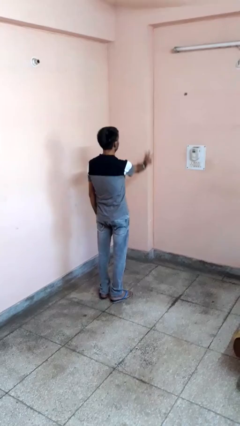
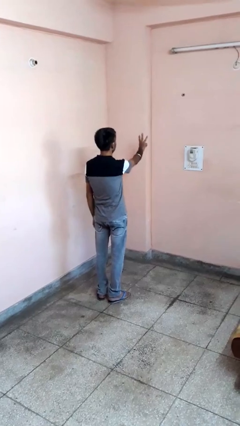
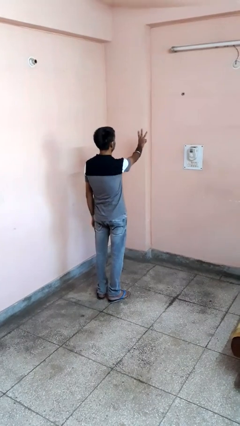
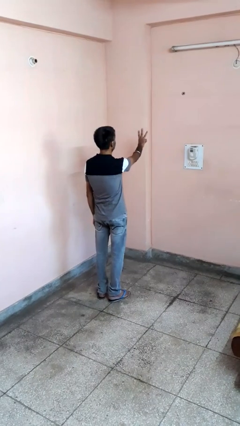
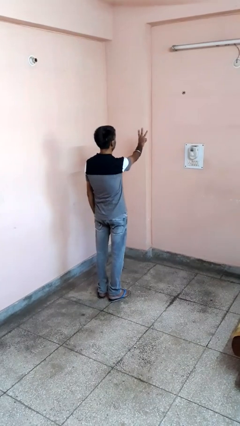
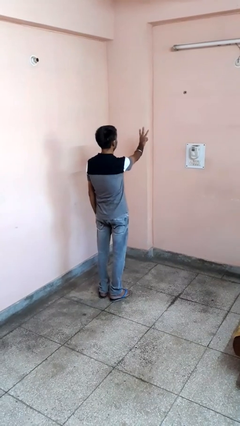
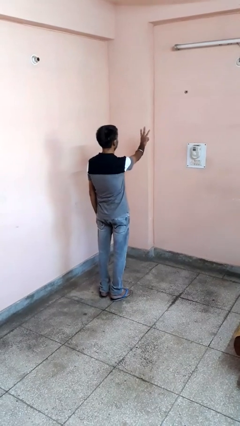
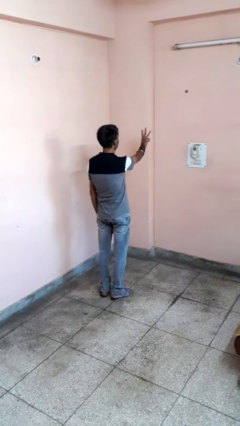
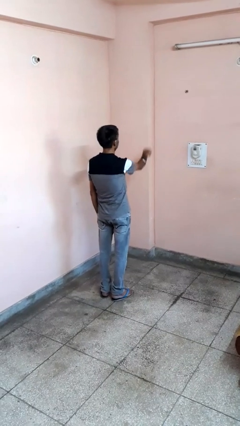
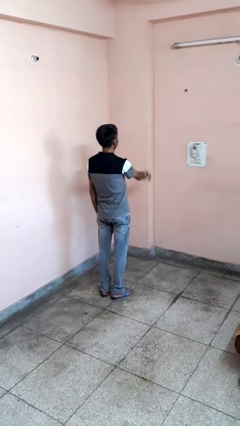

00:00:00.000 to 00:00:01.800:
person gestures number three

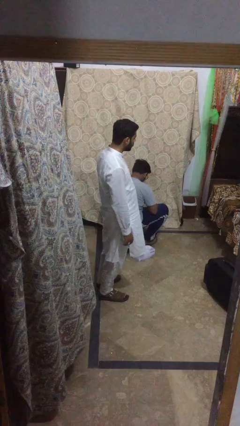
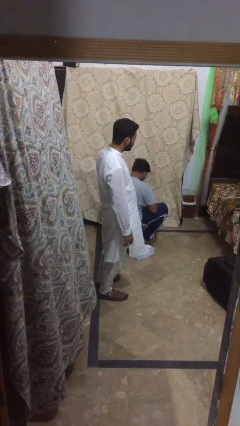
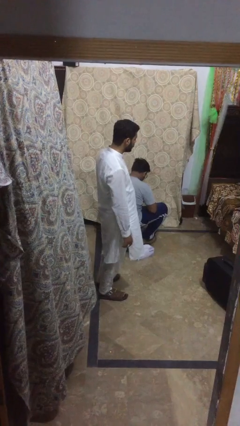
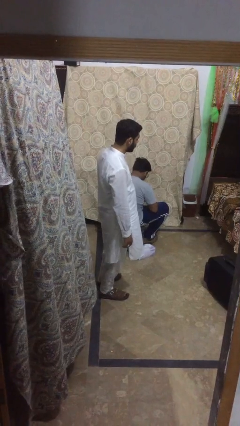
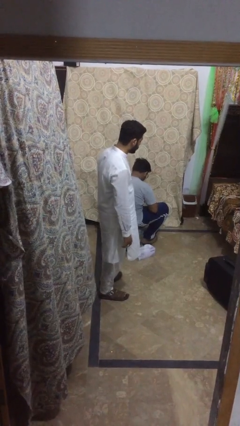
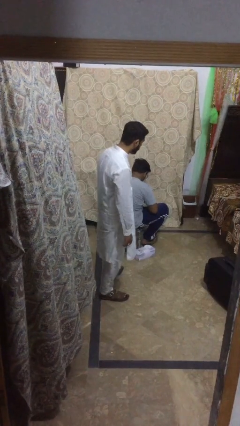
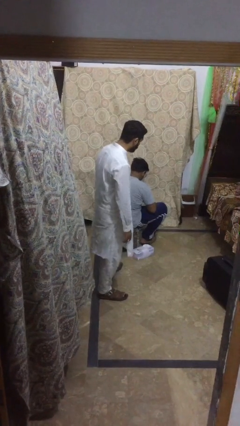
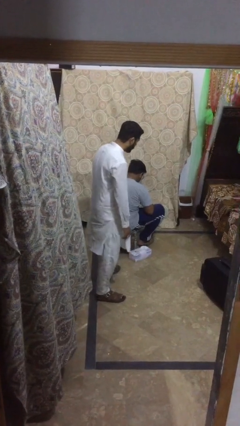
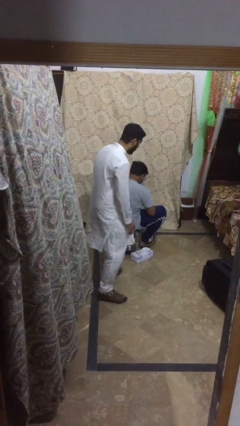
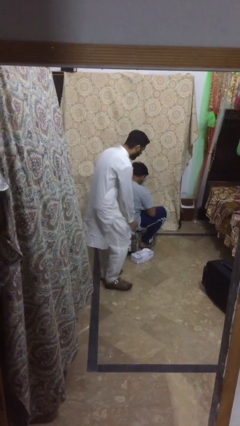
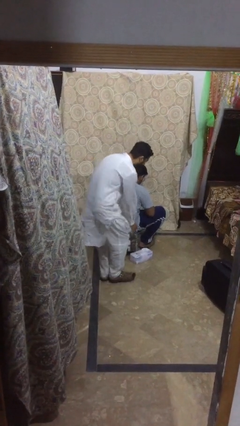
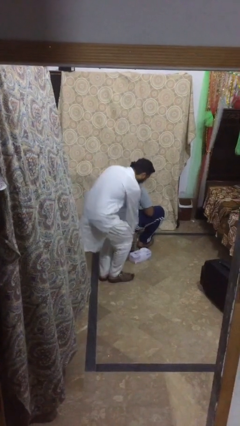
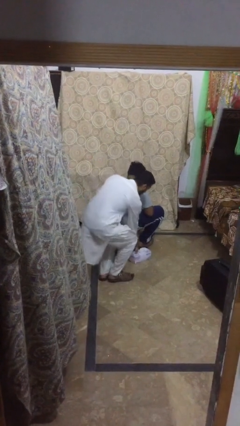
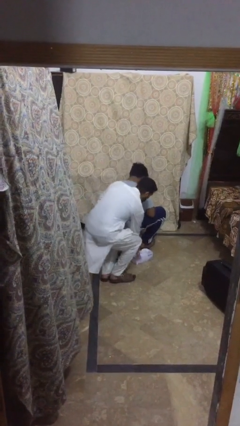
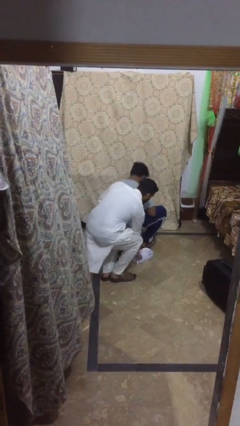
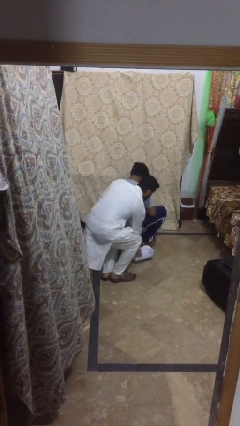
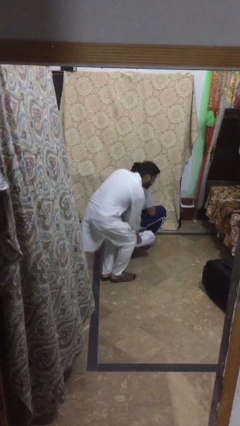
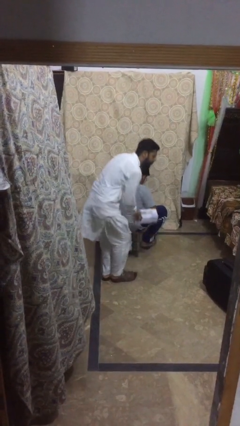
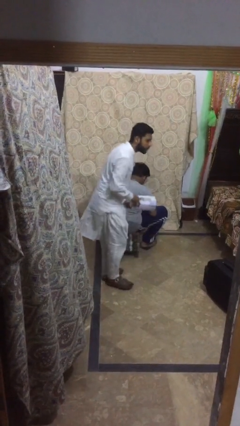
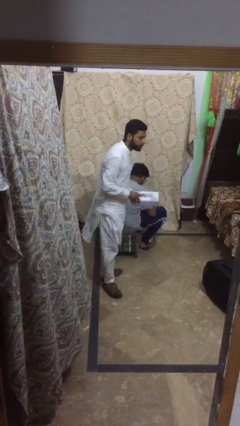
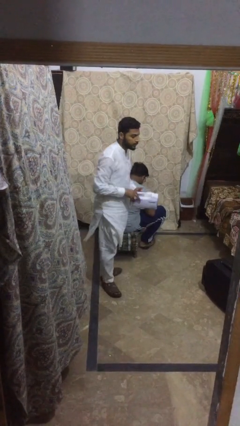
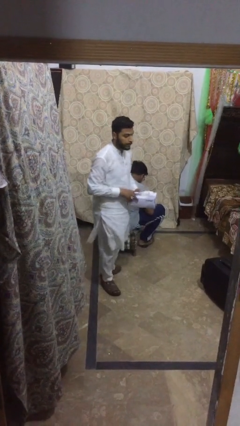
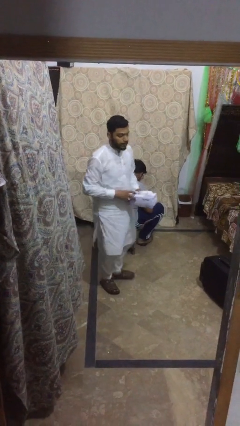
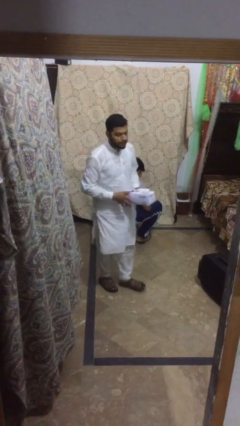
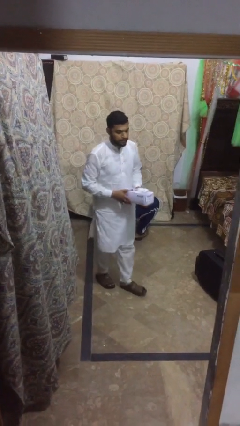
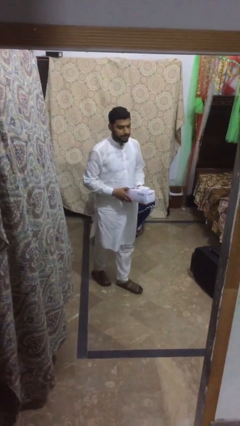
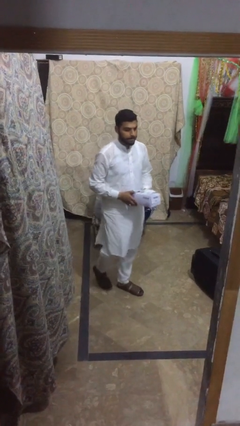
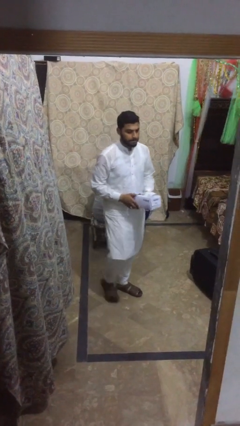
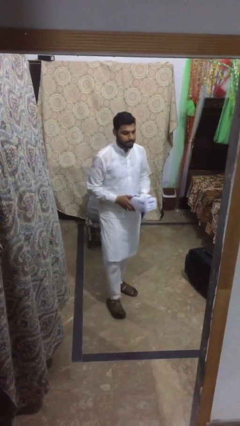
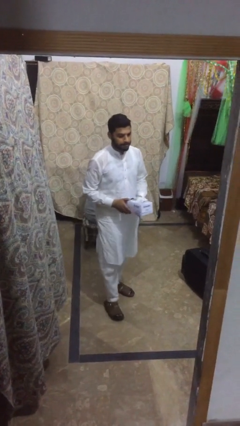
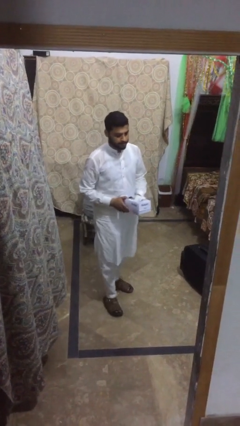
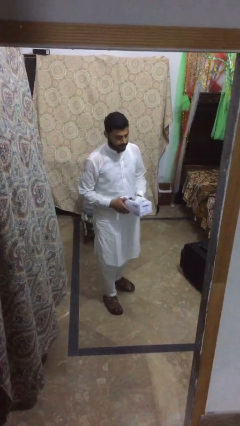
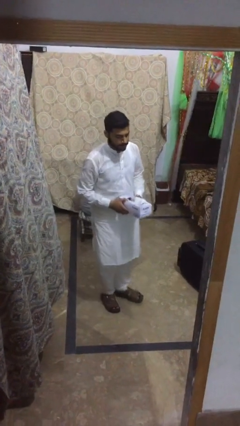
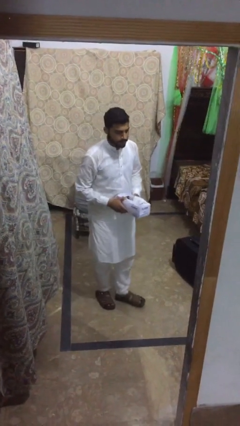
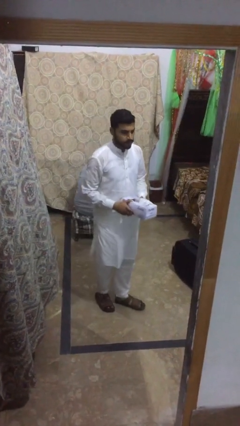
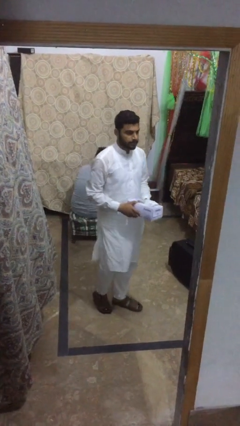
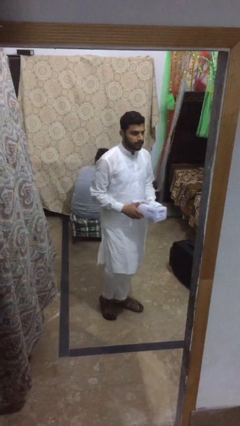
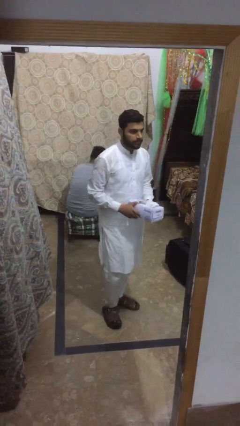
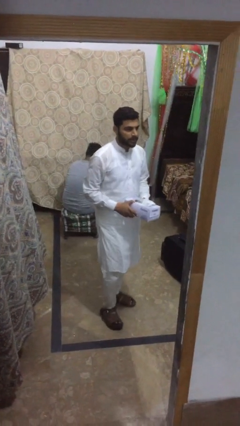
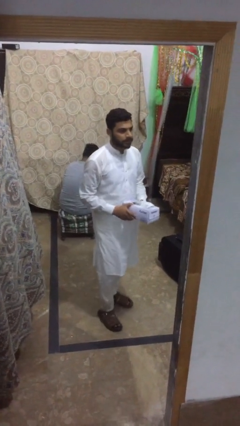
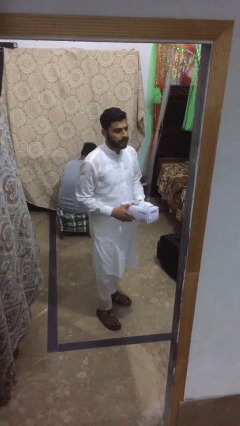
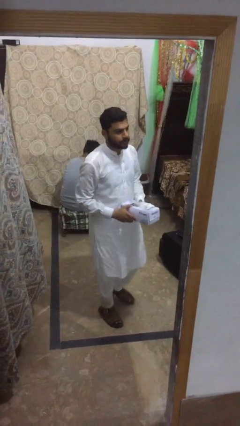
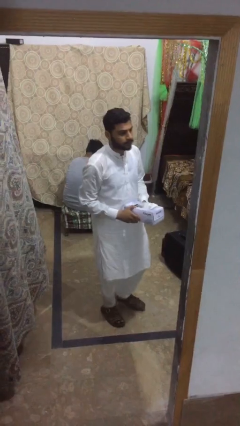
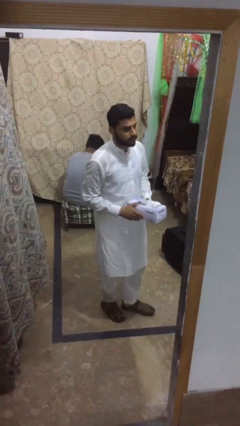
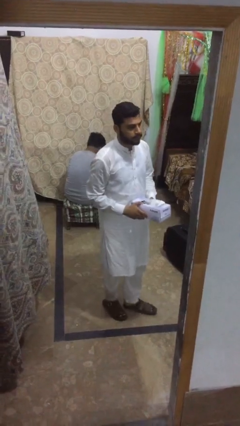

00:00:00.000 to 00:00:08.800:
person steals object from person

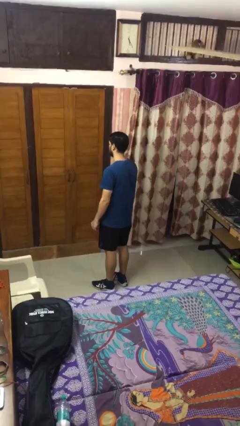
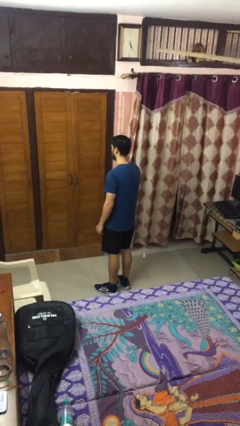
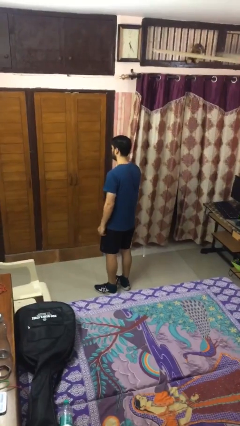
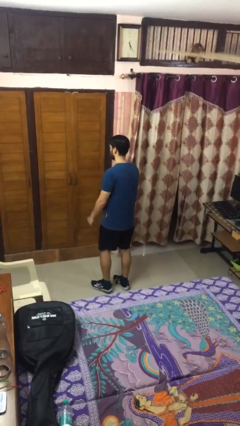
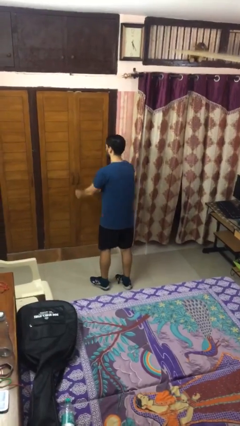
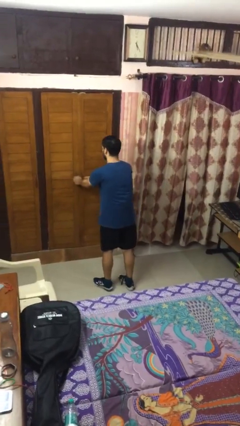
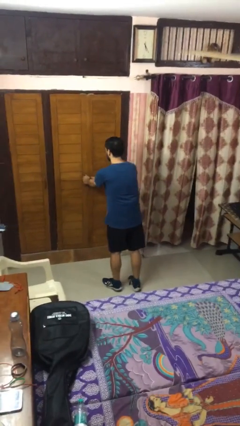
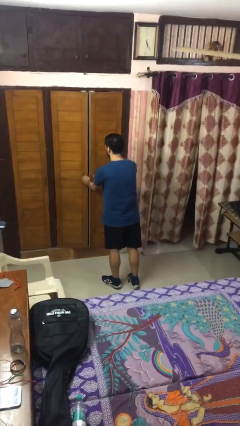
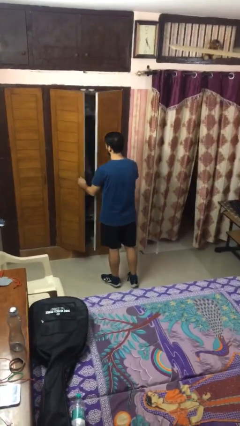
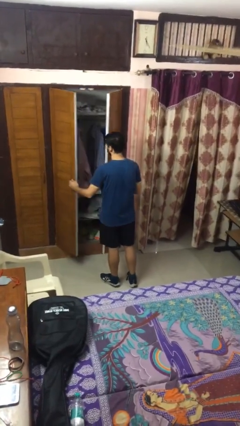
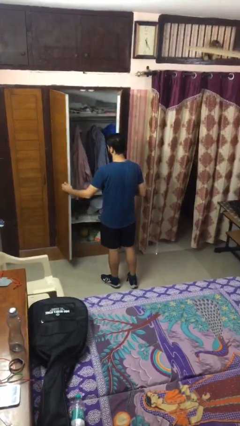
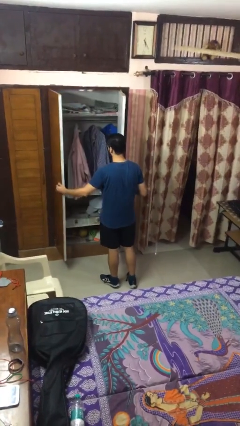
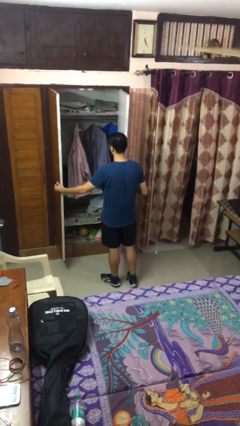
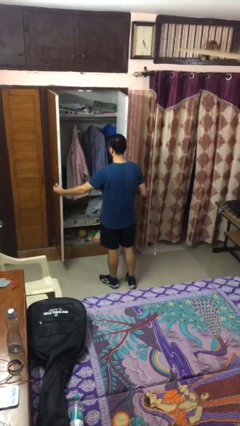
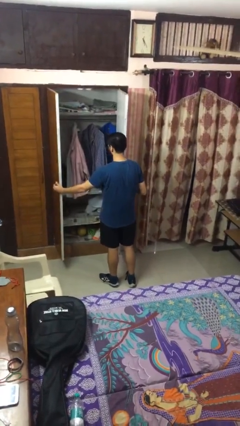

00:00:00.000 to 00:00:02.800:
person opens closet door

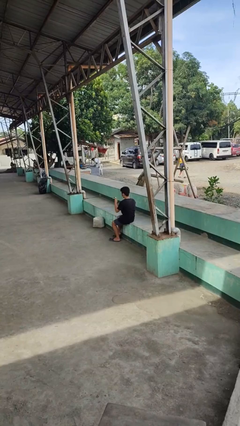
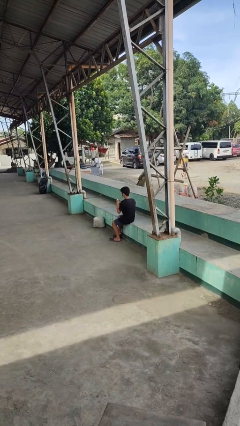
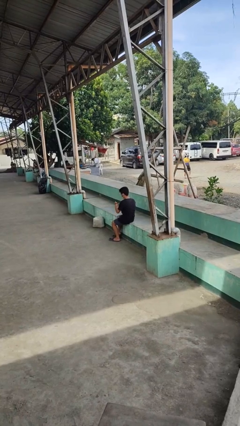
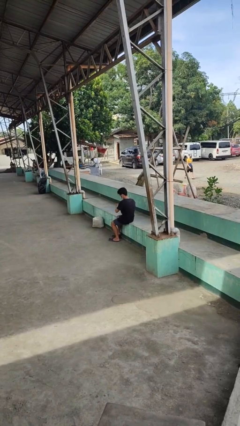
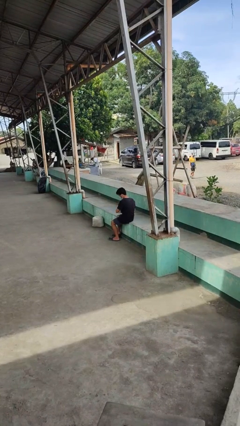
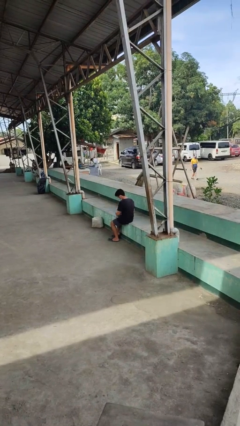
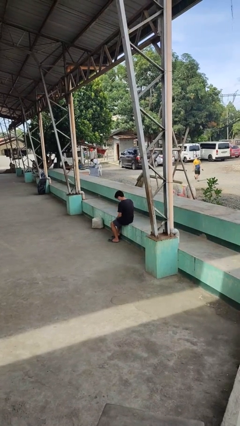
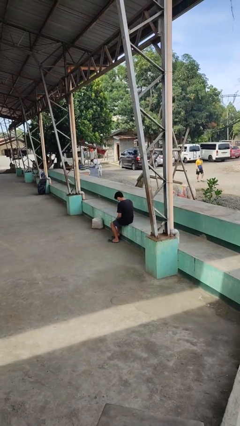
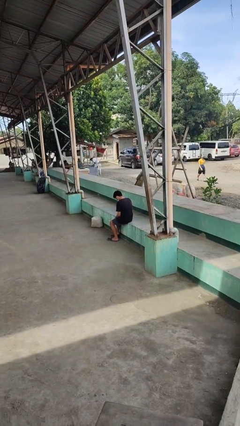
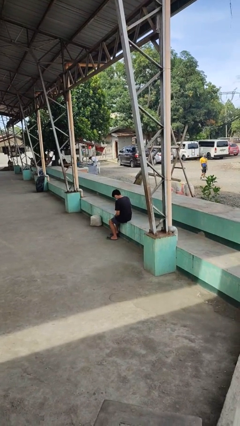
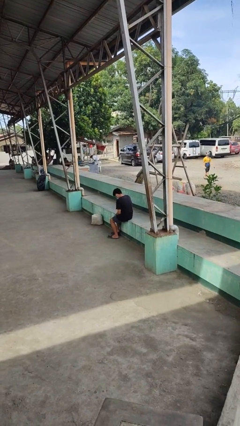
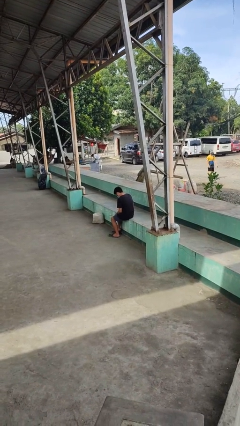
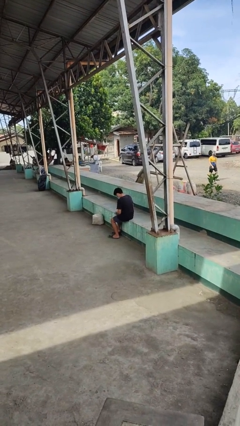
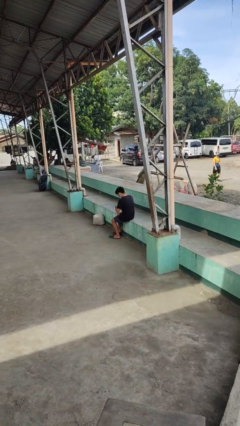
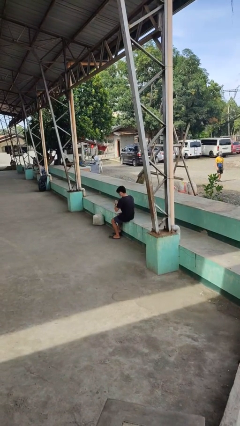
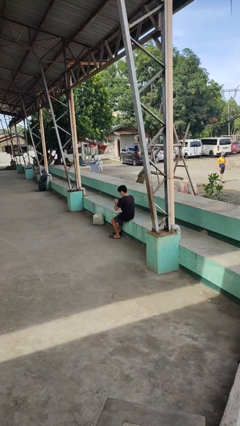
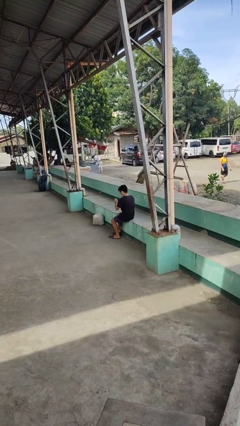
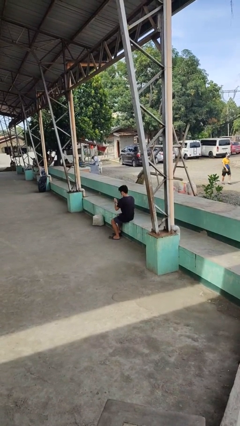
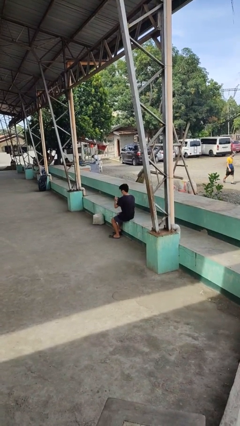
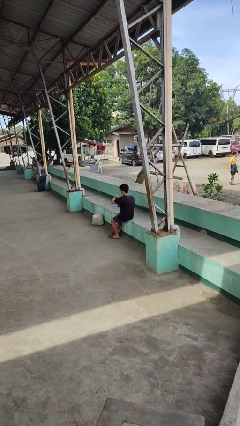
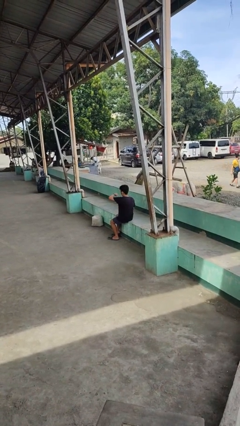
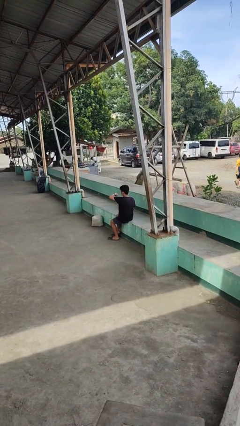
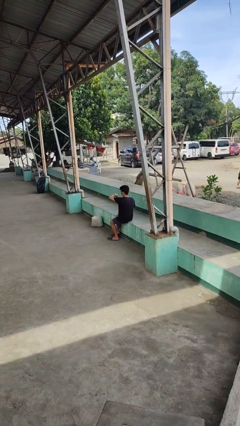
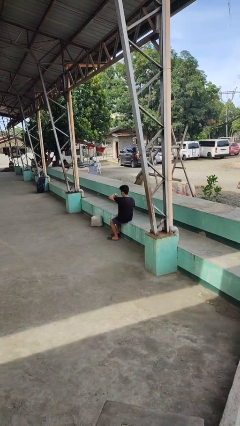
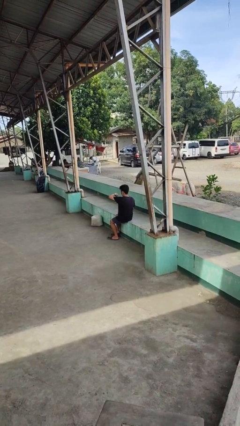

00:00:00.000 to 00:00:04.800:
person puts on wristwatch
